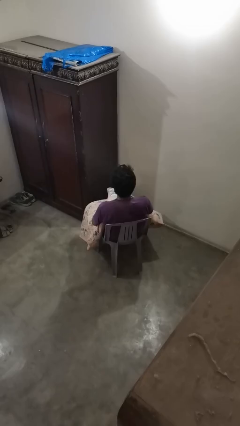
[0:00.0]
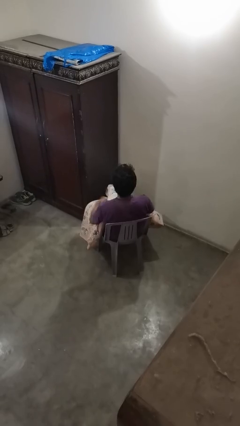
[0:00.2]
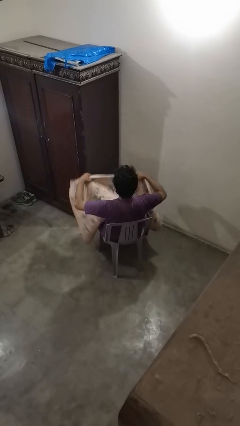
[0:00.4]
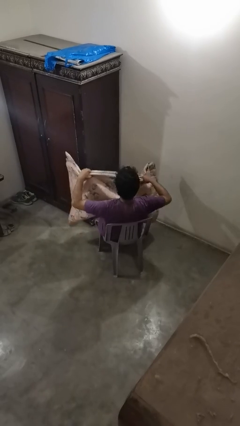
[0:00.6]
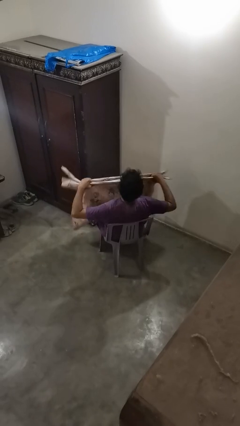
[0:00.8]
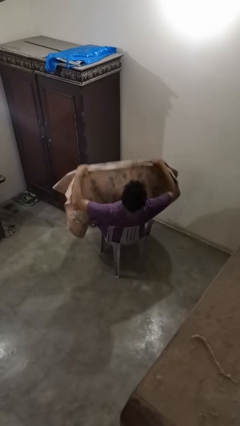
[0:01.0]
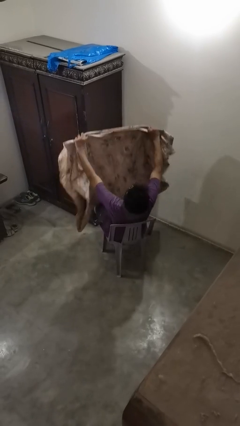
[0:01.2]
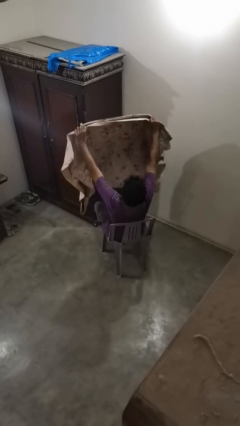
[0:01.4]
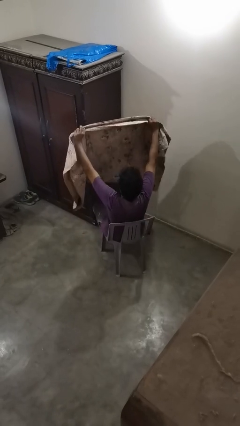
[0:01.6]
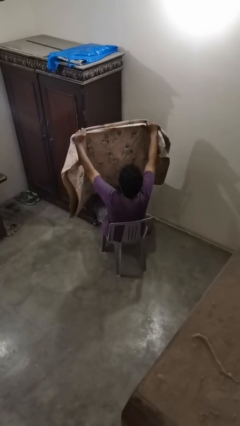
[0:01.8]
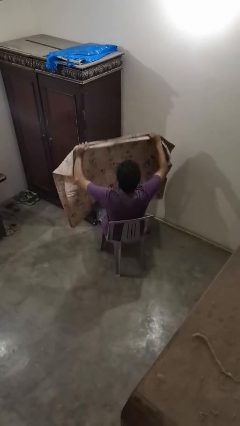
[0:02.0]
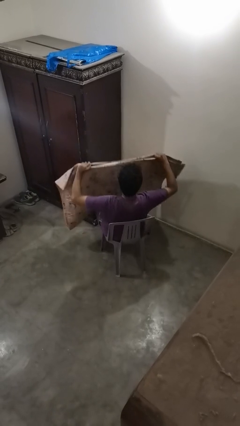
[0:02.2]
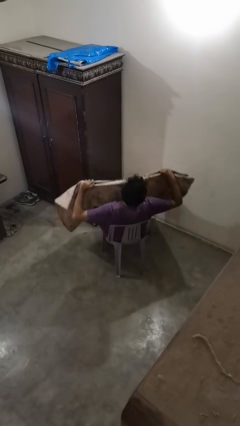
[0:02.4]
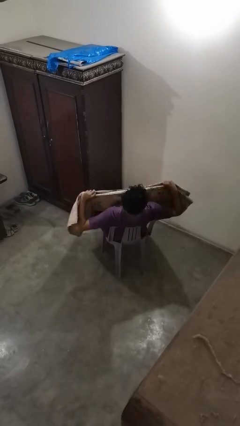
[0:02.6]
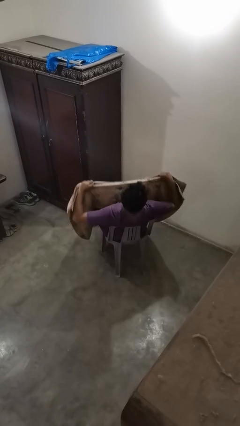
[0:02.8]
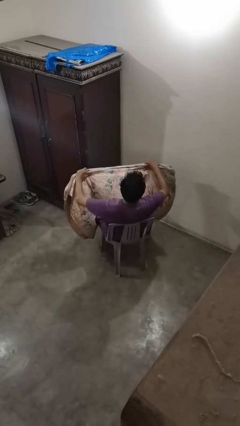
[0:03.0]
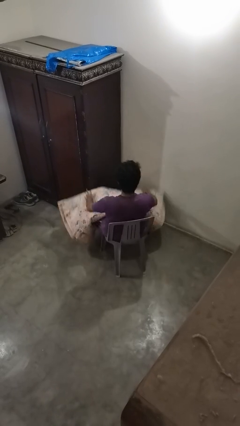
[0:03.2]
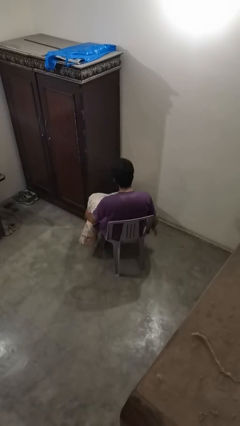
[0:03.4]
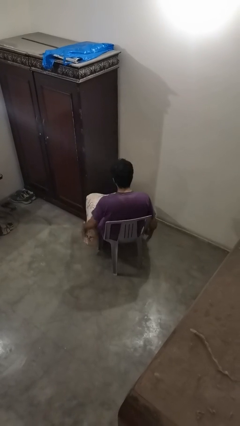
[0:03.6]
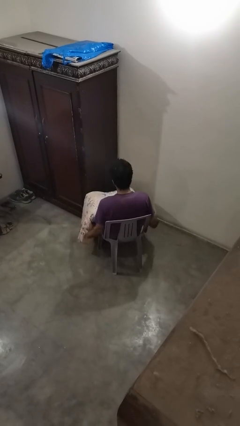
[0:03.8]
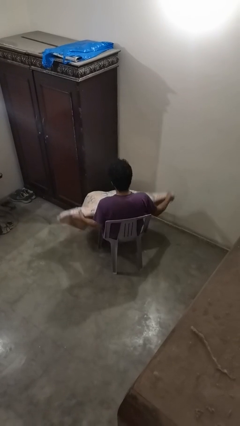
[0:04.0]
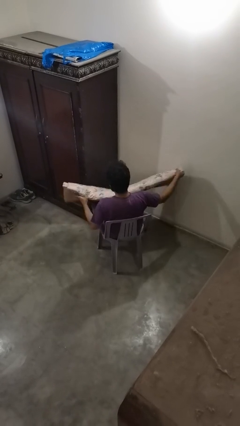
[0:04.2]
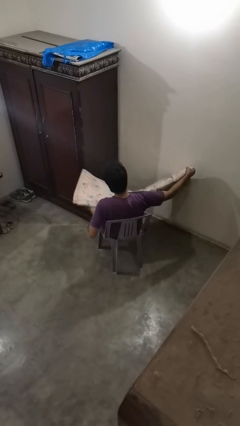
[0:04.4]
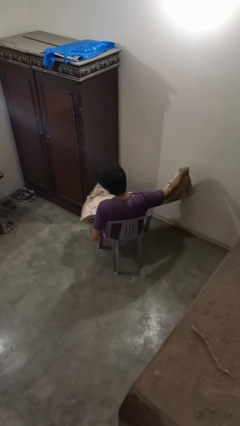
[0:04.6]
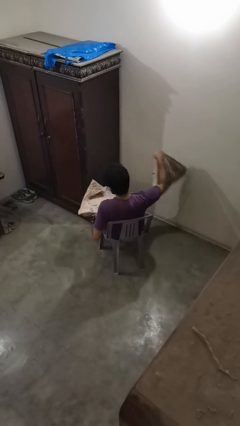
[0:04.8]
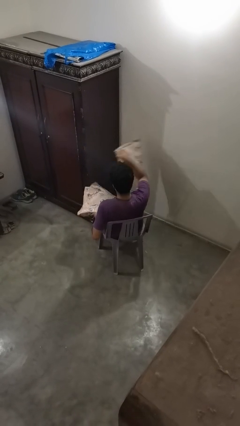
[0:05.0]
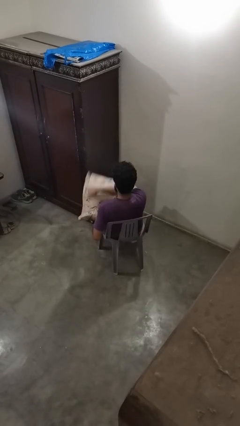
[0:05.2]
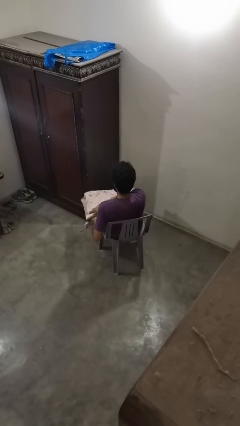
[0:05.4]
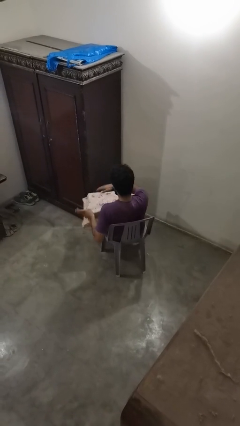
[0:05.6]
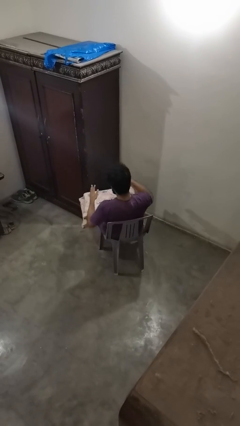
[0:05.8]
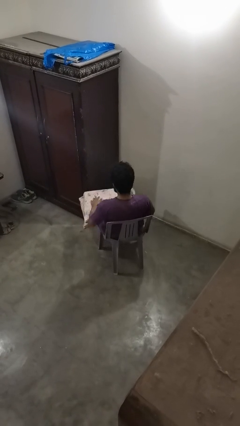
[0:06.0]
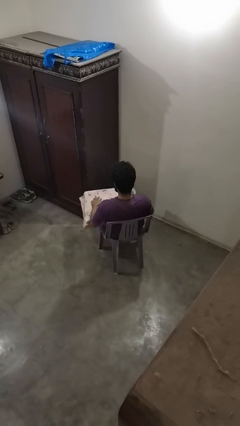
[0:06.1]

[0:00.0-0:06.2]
person folds blanket

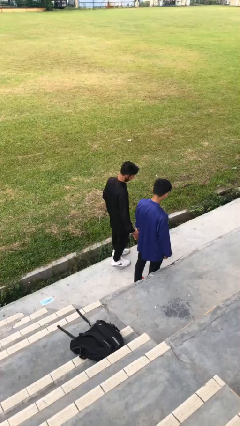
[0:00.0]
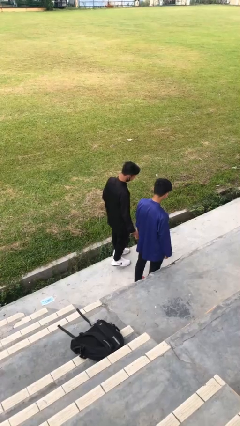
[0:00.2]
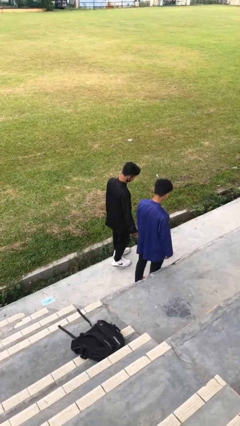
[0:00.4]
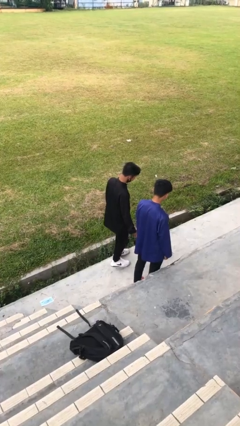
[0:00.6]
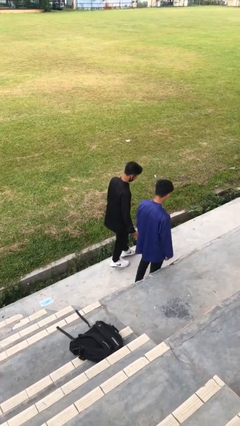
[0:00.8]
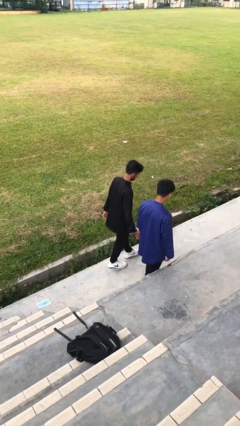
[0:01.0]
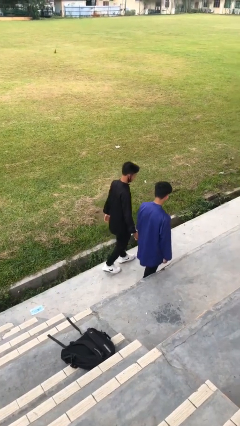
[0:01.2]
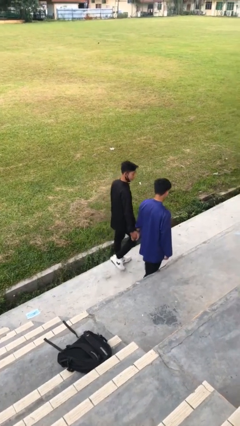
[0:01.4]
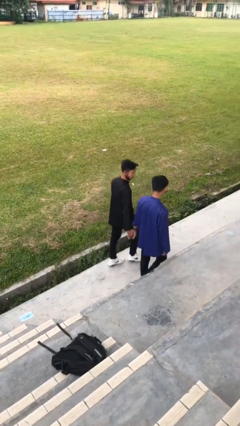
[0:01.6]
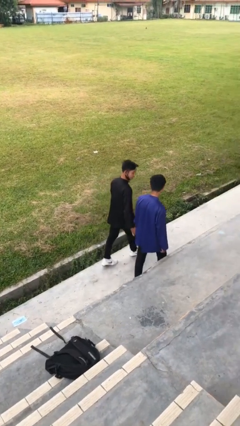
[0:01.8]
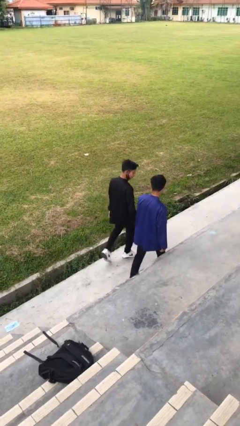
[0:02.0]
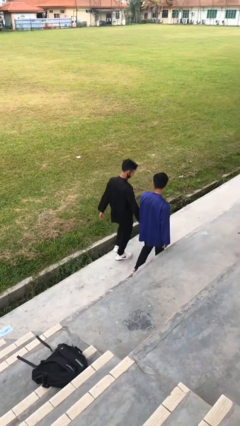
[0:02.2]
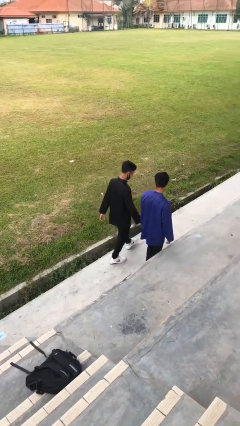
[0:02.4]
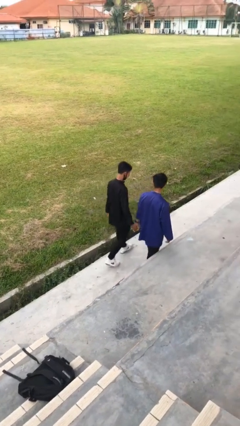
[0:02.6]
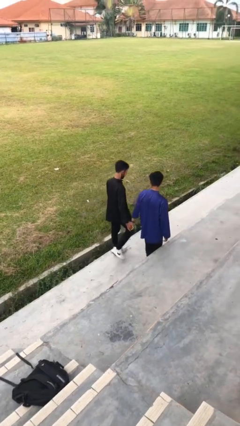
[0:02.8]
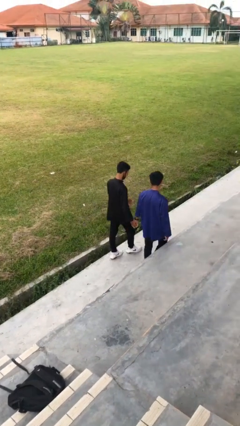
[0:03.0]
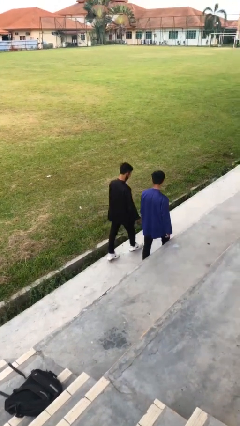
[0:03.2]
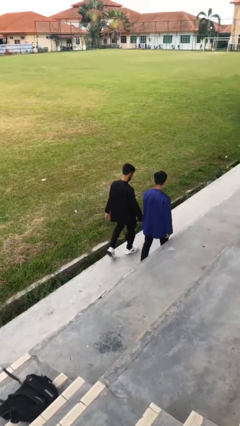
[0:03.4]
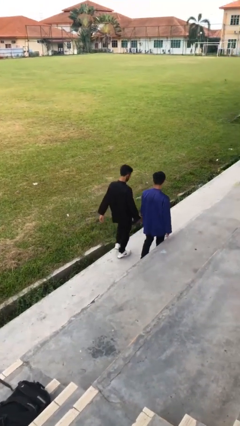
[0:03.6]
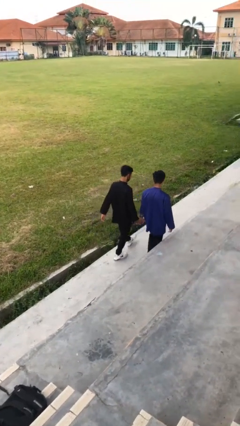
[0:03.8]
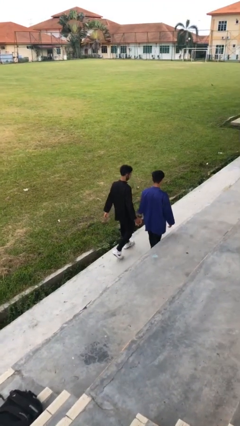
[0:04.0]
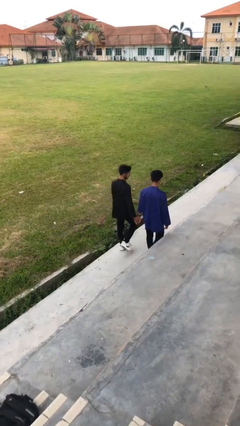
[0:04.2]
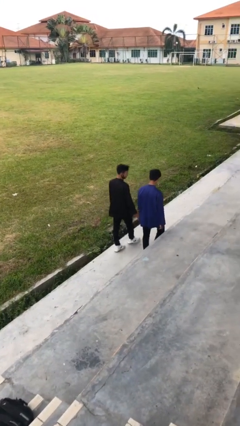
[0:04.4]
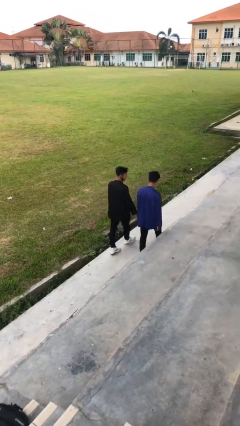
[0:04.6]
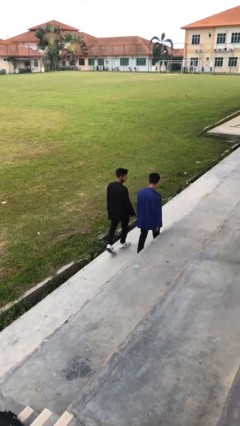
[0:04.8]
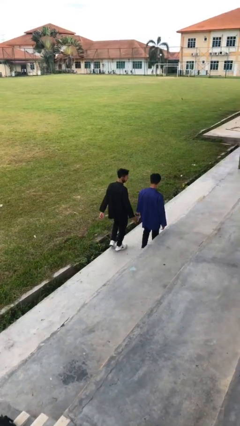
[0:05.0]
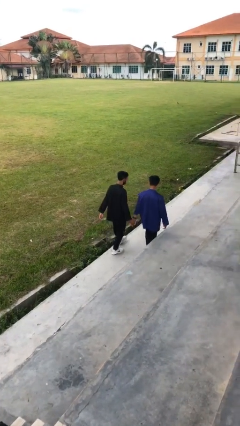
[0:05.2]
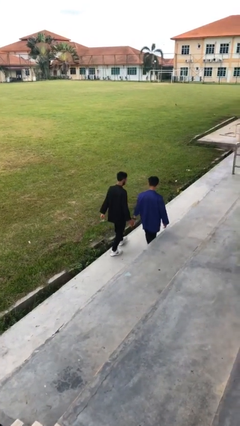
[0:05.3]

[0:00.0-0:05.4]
person holds hand

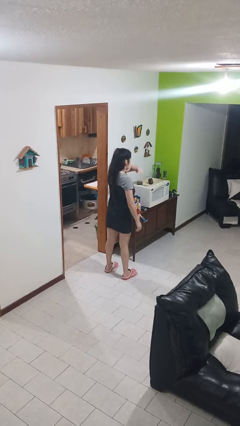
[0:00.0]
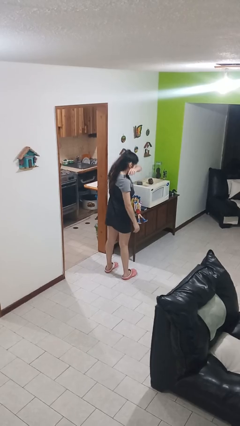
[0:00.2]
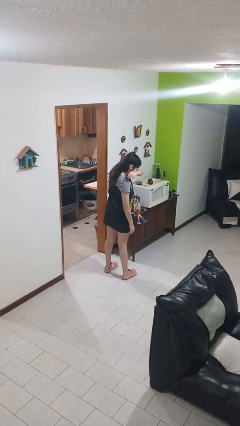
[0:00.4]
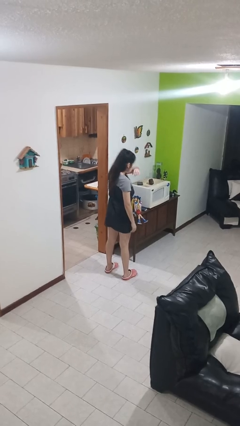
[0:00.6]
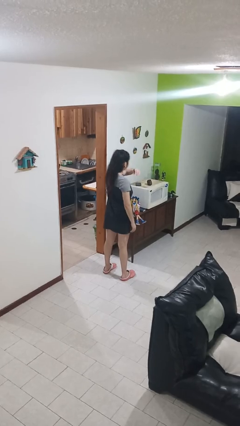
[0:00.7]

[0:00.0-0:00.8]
person sneezes into arm

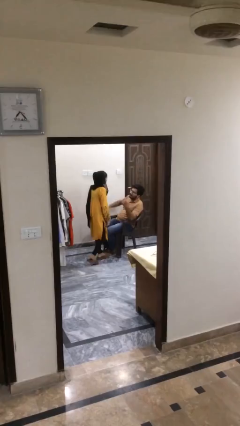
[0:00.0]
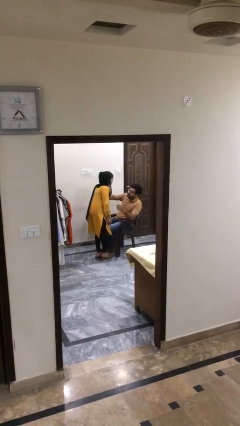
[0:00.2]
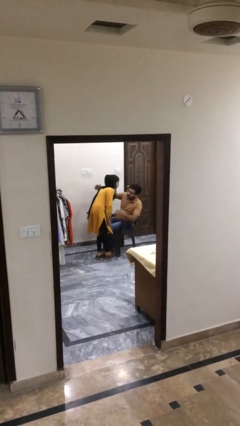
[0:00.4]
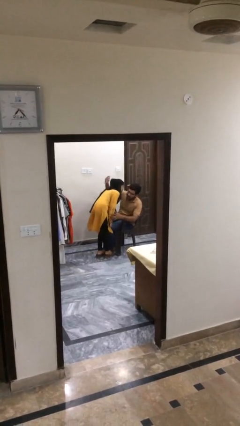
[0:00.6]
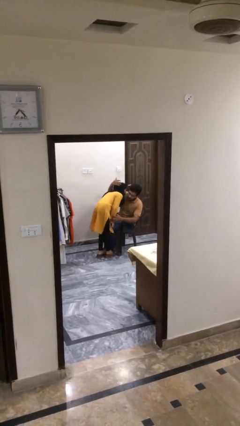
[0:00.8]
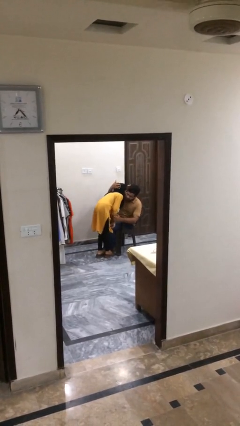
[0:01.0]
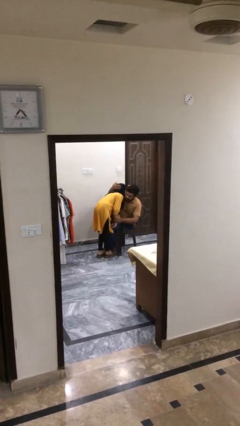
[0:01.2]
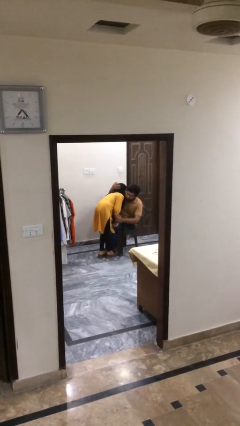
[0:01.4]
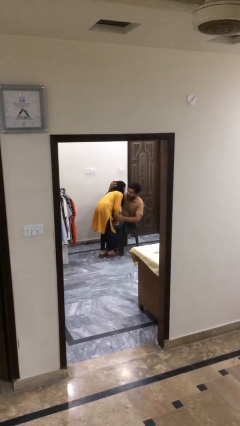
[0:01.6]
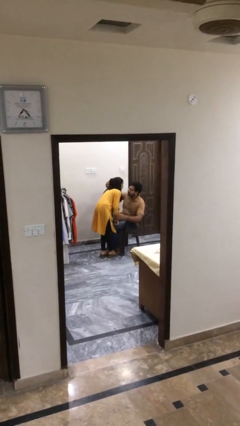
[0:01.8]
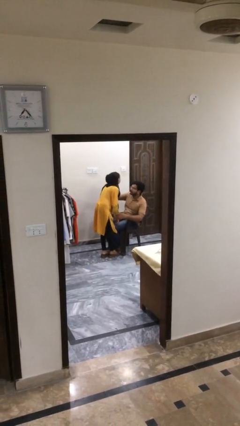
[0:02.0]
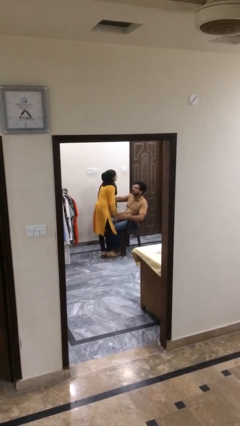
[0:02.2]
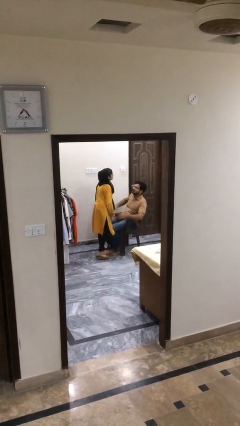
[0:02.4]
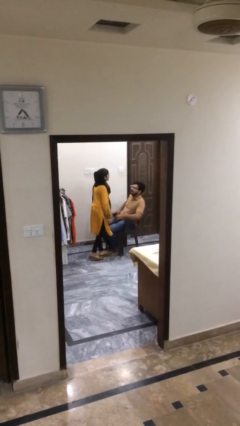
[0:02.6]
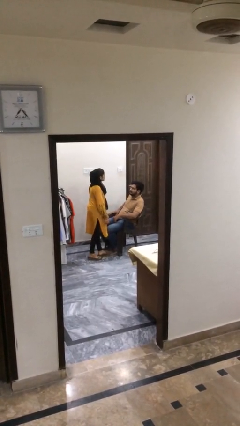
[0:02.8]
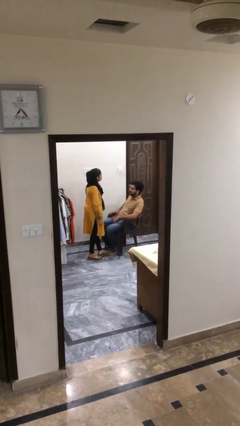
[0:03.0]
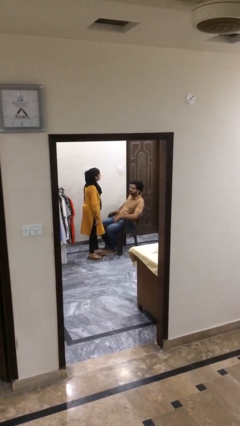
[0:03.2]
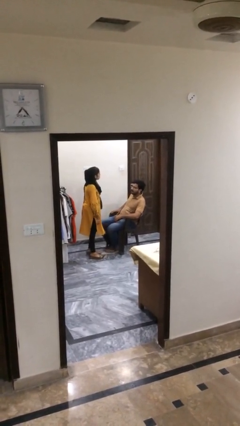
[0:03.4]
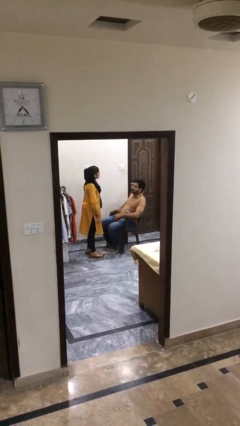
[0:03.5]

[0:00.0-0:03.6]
person embraces person

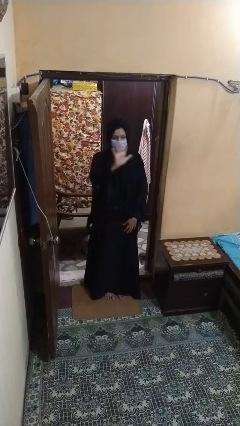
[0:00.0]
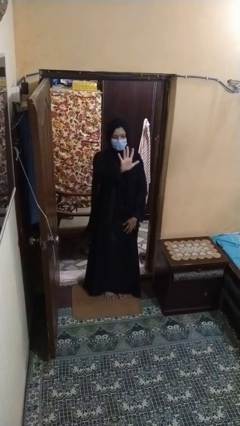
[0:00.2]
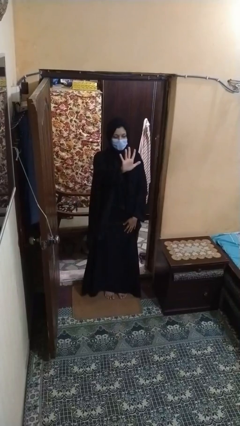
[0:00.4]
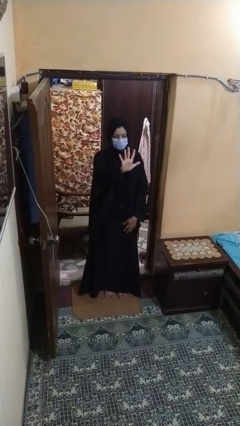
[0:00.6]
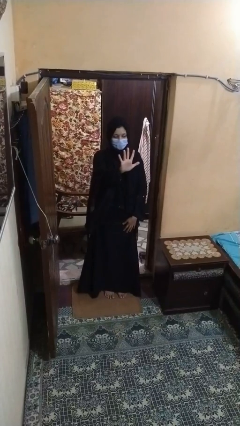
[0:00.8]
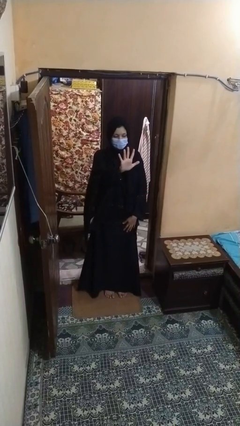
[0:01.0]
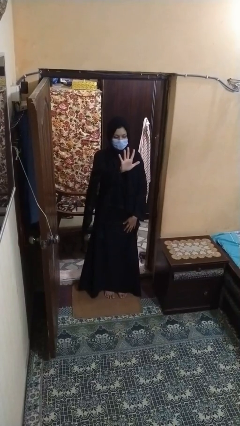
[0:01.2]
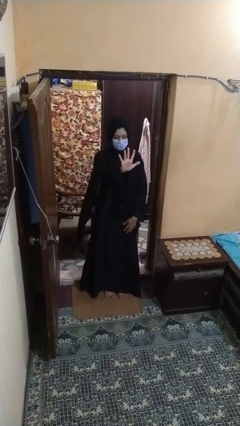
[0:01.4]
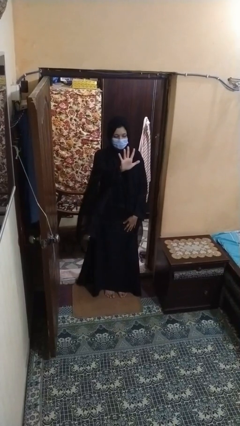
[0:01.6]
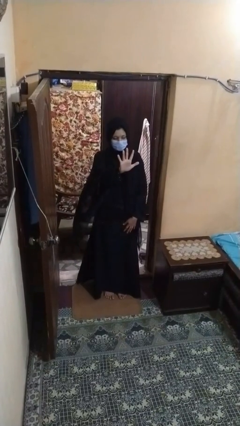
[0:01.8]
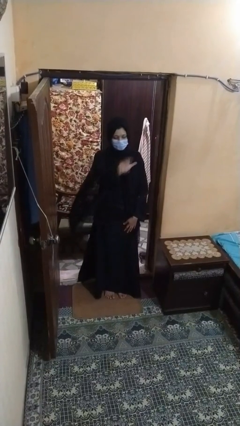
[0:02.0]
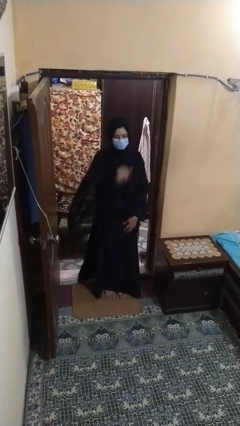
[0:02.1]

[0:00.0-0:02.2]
person gestures number five
